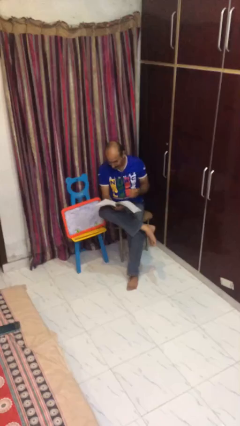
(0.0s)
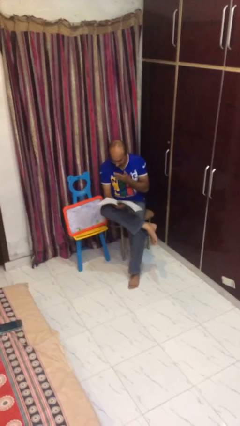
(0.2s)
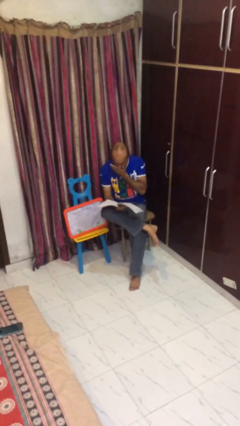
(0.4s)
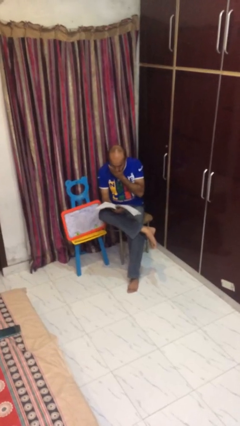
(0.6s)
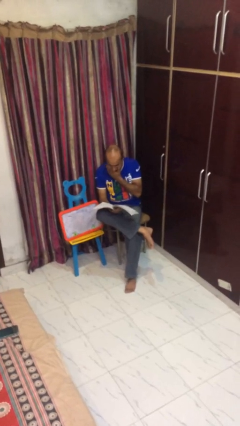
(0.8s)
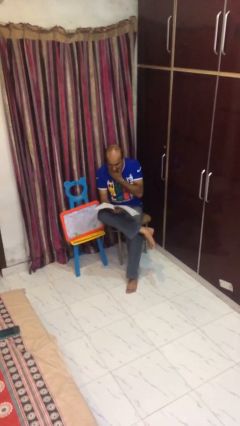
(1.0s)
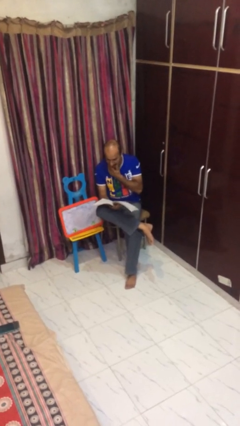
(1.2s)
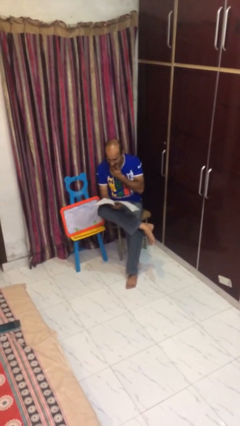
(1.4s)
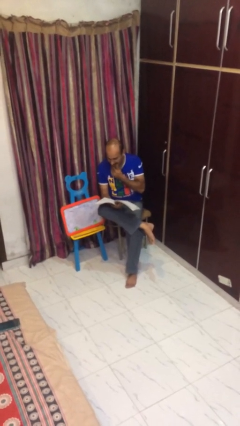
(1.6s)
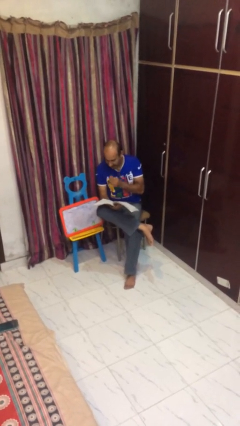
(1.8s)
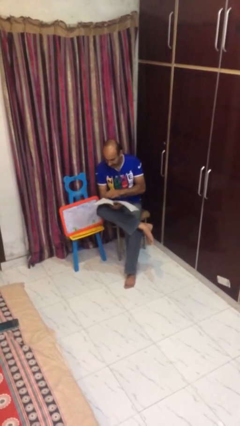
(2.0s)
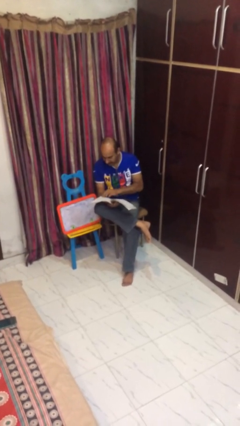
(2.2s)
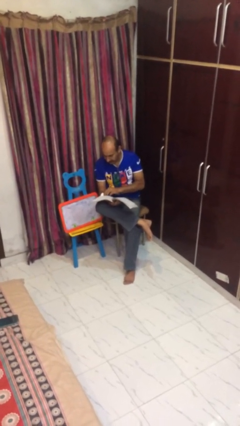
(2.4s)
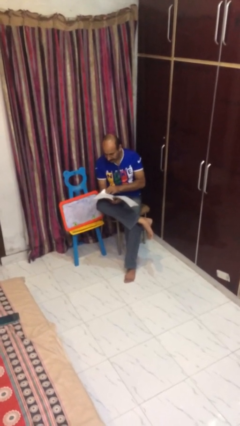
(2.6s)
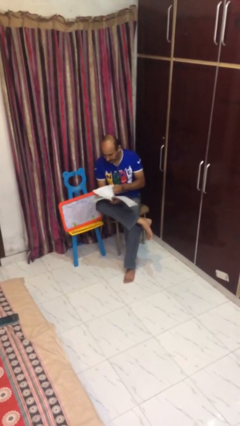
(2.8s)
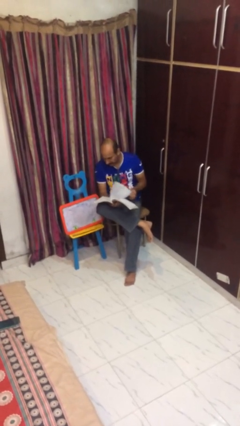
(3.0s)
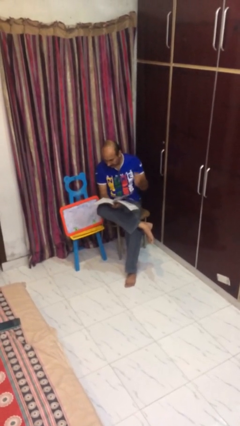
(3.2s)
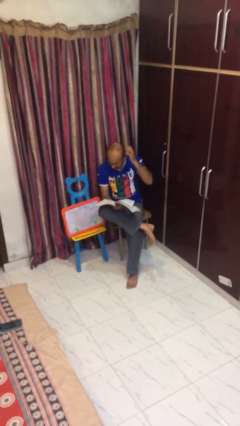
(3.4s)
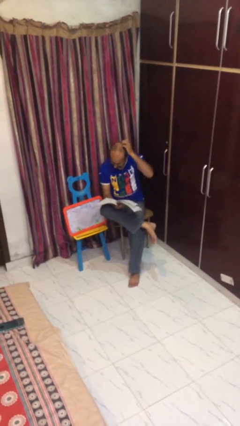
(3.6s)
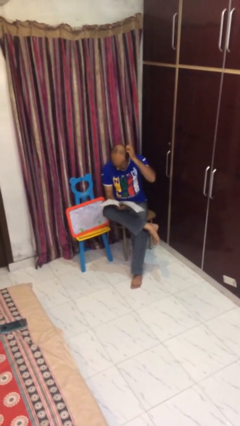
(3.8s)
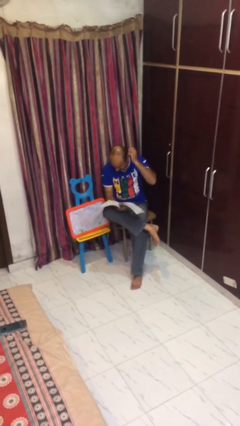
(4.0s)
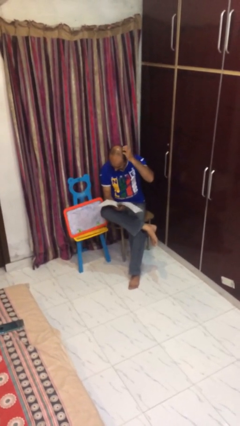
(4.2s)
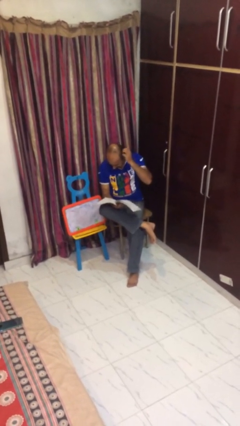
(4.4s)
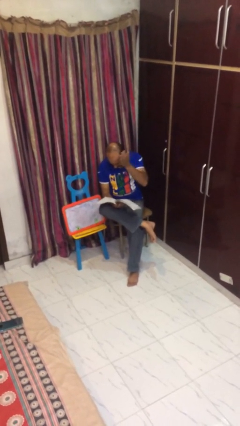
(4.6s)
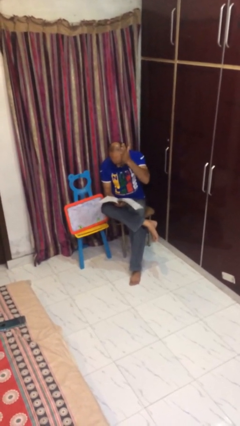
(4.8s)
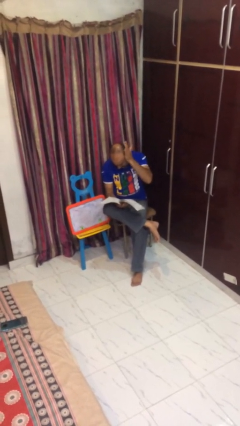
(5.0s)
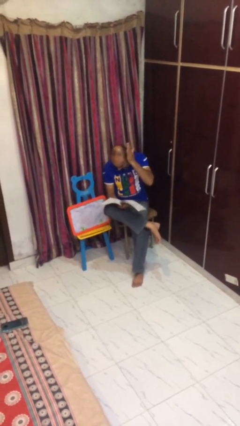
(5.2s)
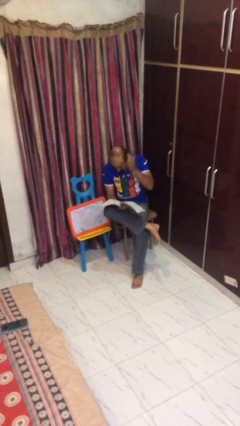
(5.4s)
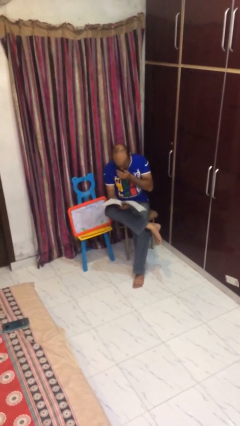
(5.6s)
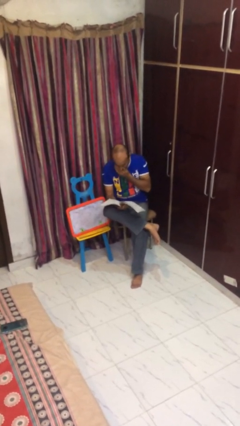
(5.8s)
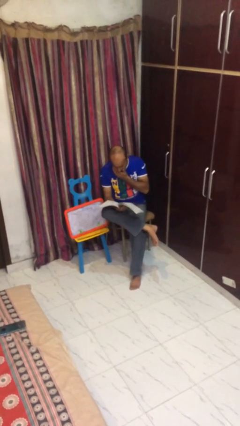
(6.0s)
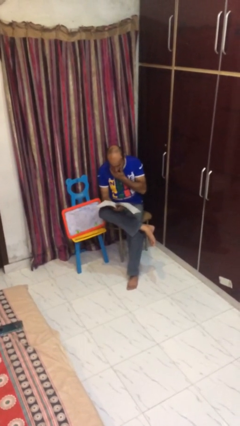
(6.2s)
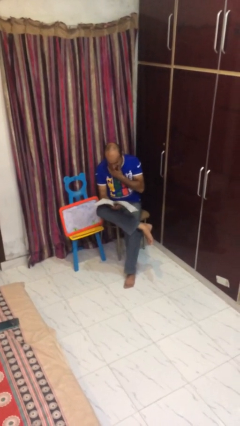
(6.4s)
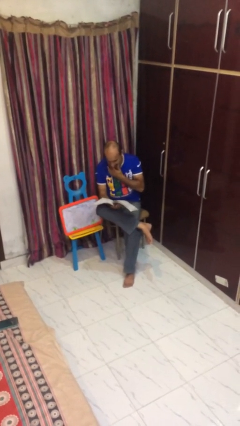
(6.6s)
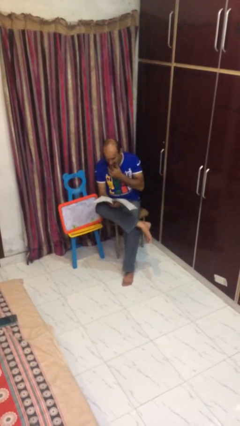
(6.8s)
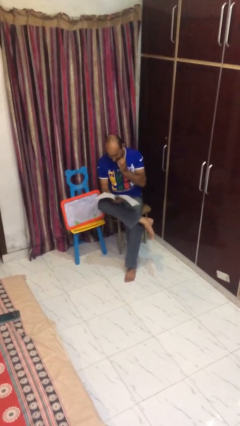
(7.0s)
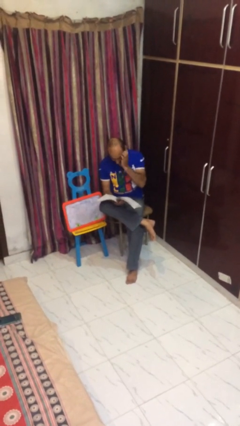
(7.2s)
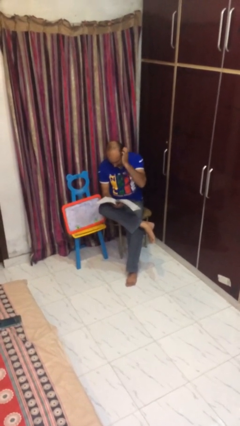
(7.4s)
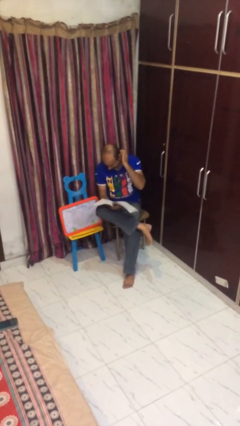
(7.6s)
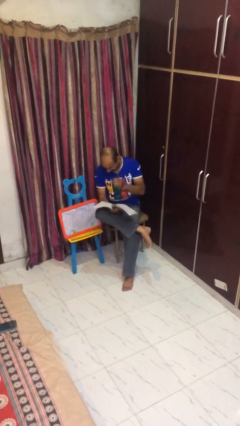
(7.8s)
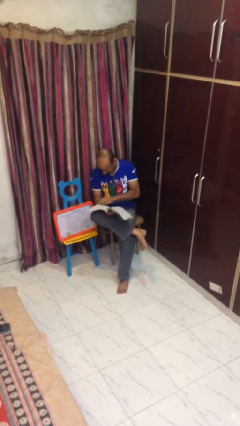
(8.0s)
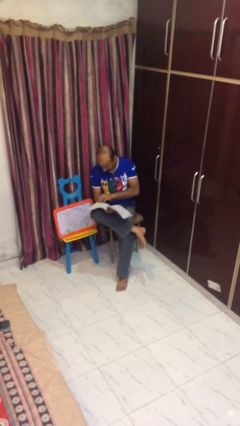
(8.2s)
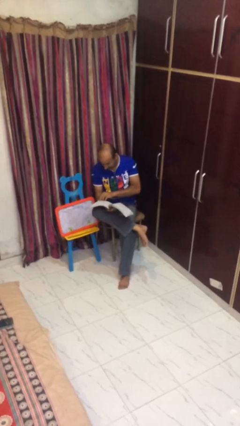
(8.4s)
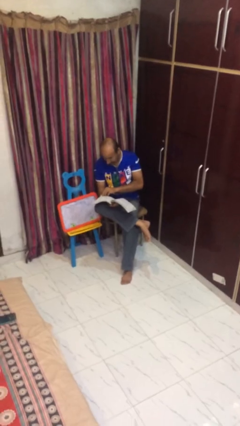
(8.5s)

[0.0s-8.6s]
person reads document

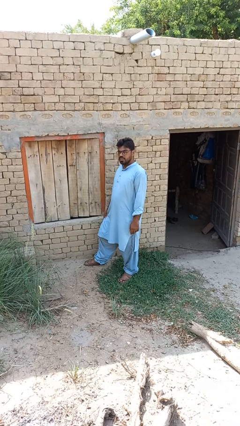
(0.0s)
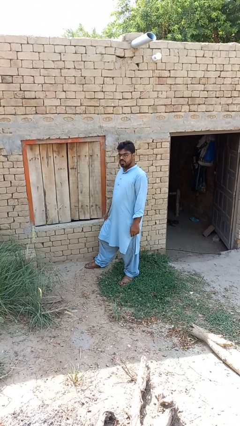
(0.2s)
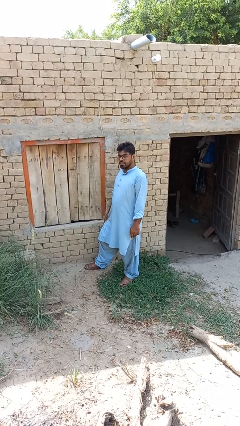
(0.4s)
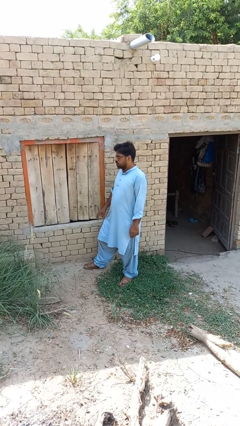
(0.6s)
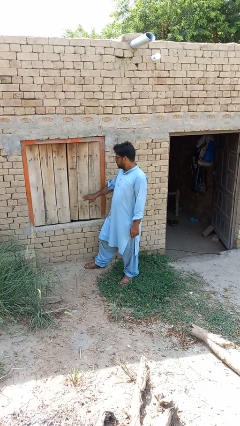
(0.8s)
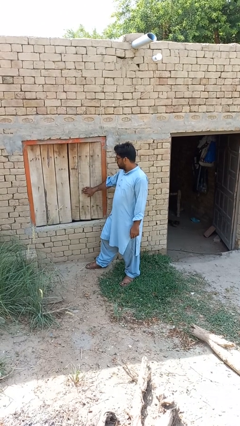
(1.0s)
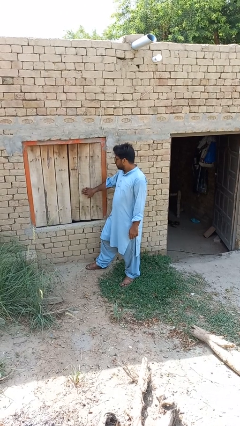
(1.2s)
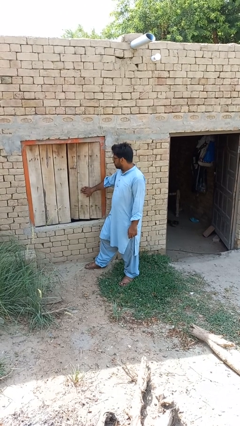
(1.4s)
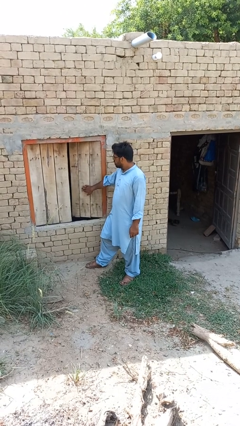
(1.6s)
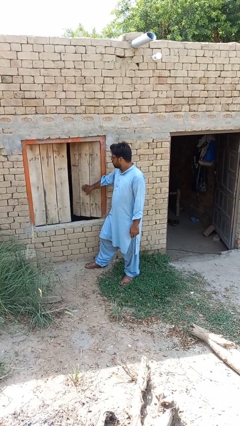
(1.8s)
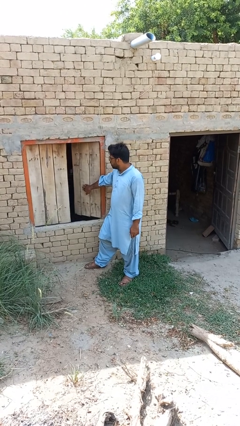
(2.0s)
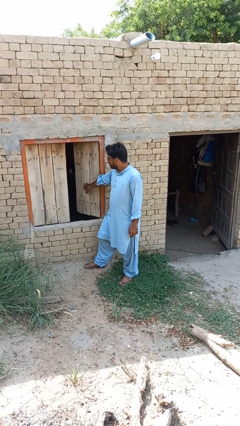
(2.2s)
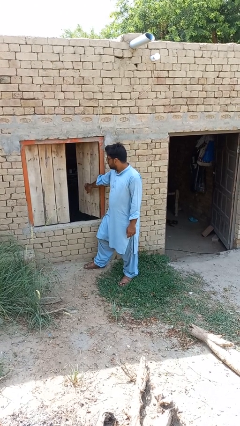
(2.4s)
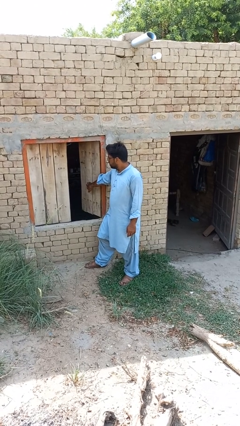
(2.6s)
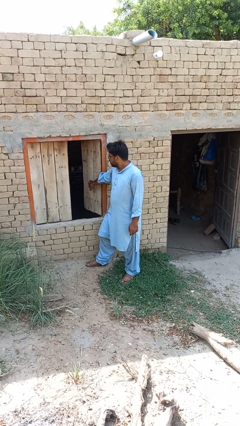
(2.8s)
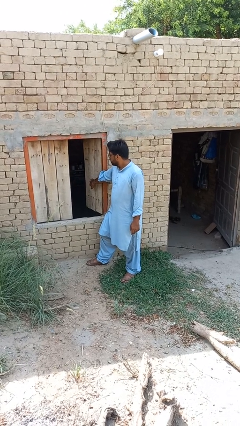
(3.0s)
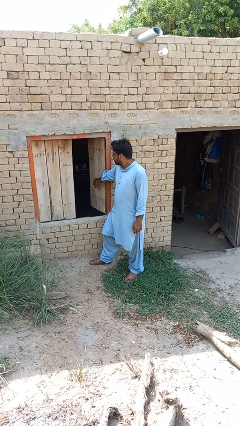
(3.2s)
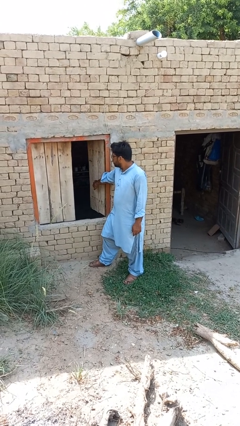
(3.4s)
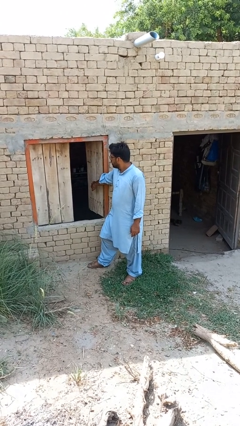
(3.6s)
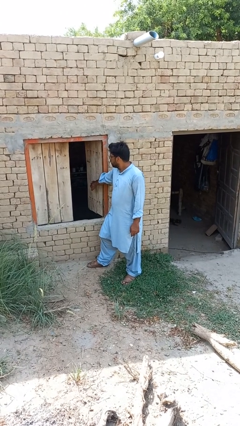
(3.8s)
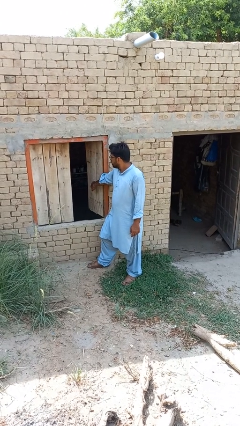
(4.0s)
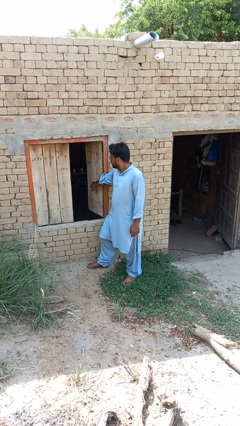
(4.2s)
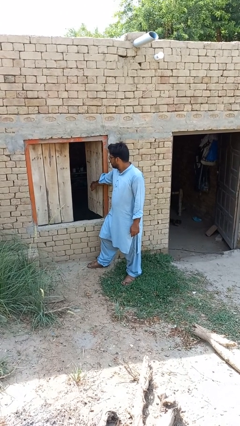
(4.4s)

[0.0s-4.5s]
person opens home window

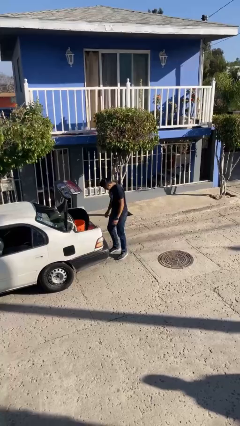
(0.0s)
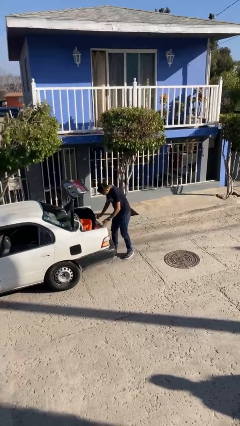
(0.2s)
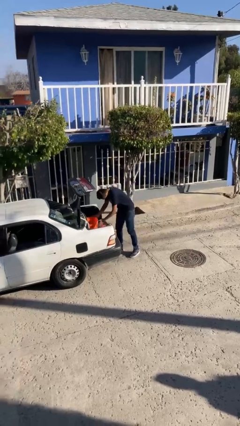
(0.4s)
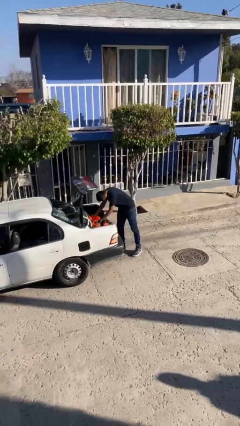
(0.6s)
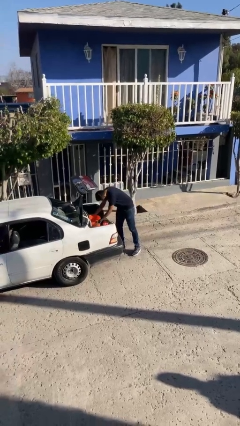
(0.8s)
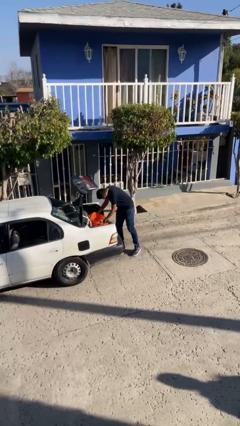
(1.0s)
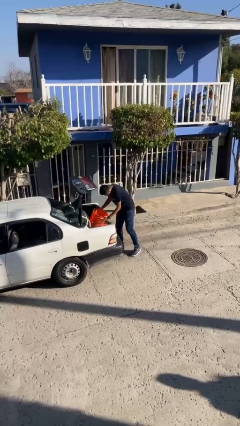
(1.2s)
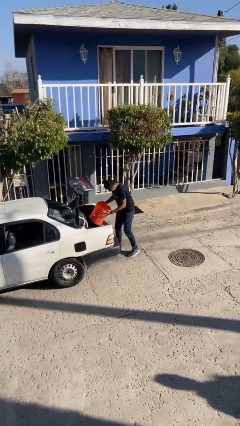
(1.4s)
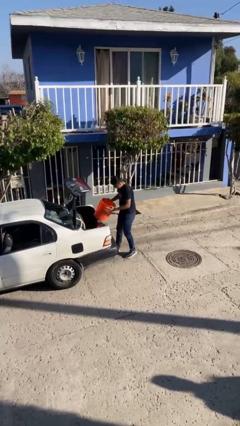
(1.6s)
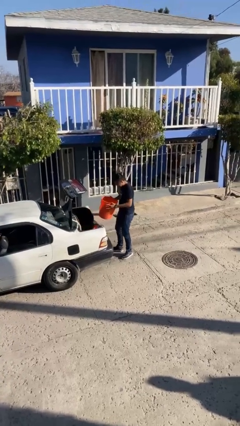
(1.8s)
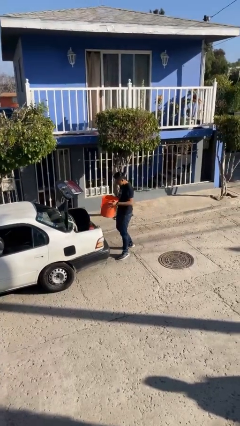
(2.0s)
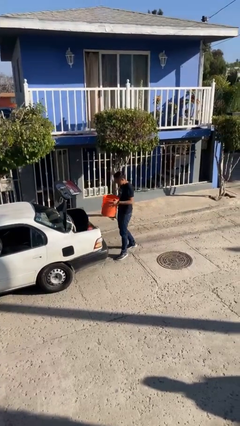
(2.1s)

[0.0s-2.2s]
person unloads car

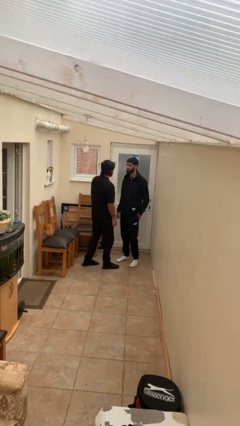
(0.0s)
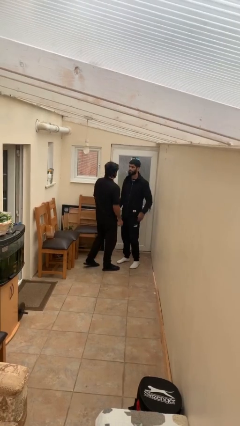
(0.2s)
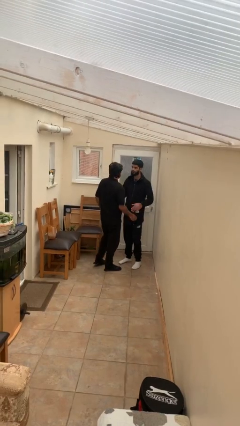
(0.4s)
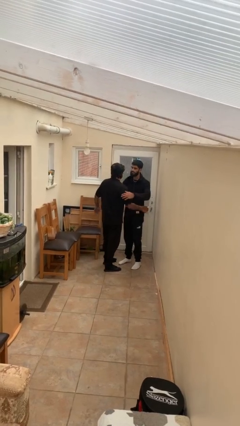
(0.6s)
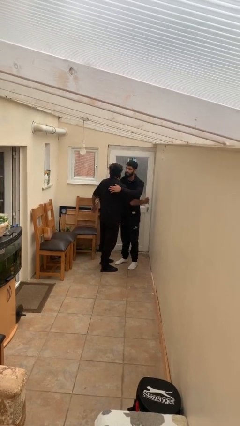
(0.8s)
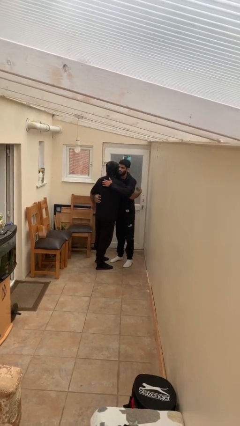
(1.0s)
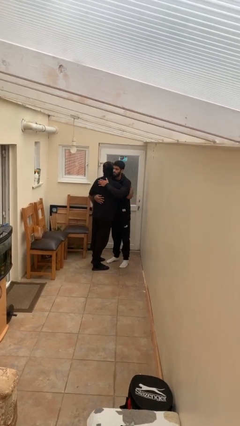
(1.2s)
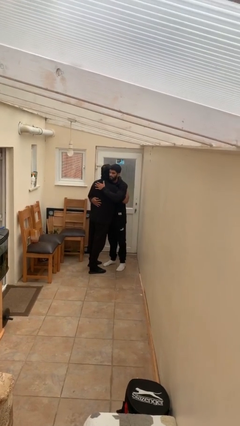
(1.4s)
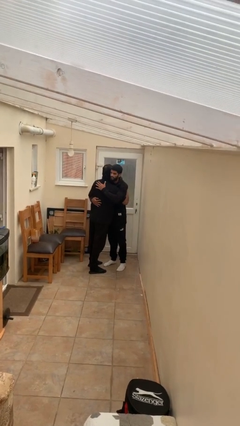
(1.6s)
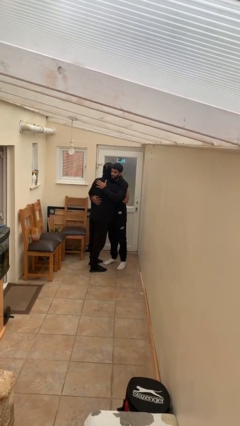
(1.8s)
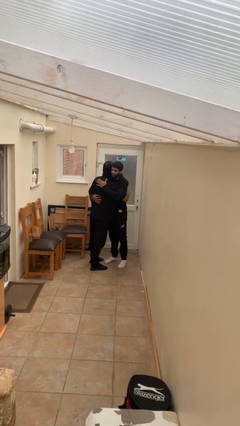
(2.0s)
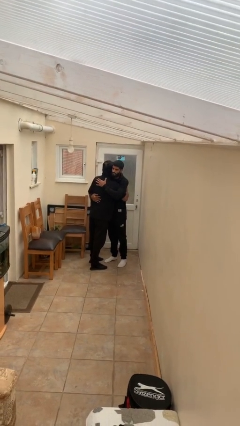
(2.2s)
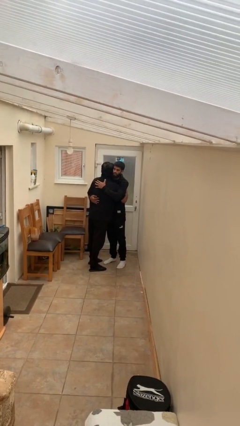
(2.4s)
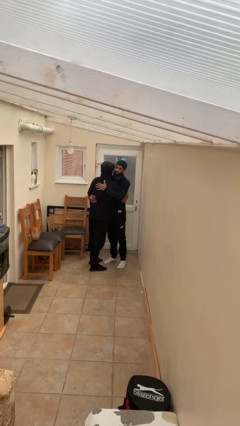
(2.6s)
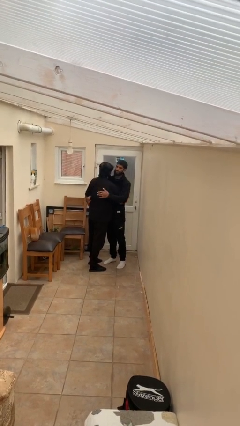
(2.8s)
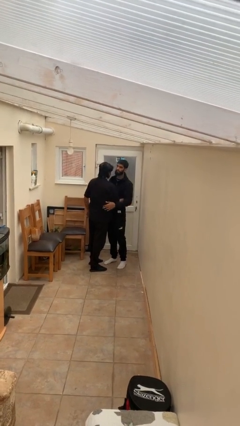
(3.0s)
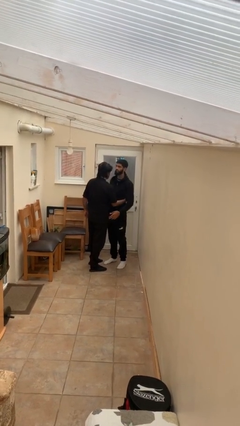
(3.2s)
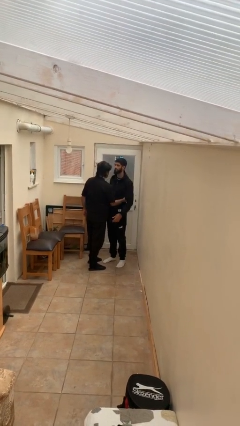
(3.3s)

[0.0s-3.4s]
person embraces person
